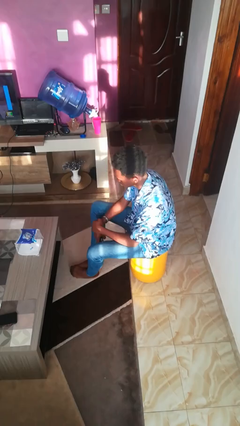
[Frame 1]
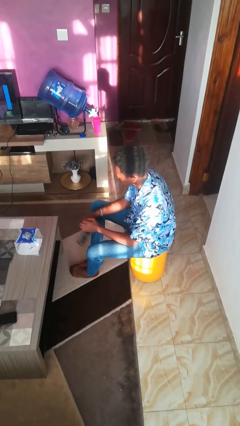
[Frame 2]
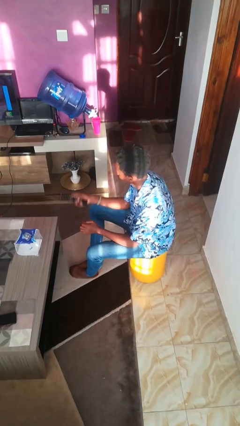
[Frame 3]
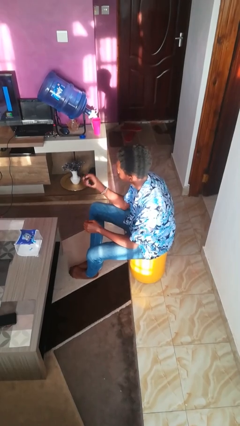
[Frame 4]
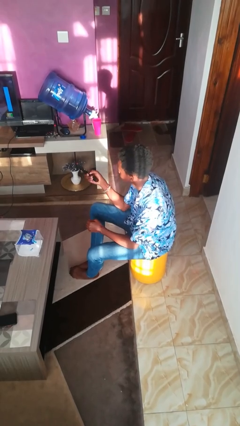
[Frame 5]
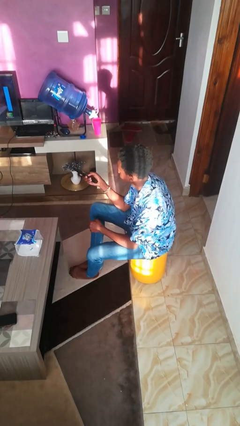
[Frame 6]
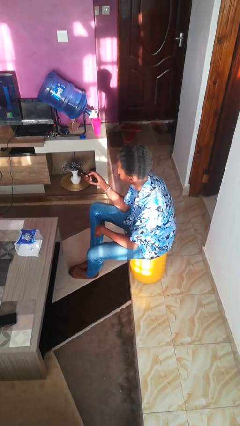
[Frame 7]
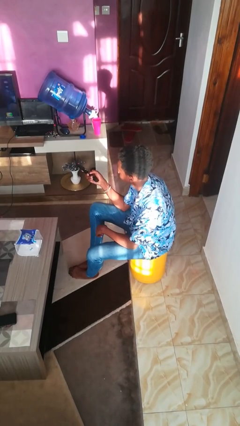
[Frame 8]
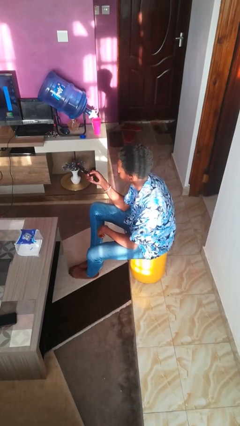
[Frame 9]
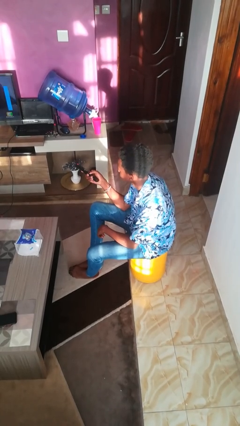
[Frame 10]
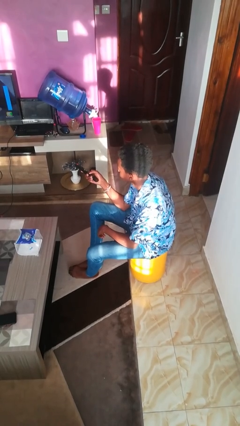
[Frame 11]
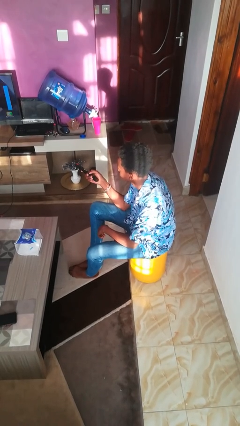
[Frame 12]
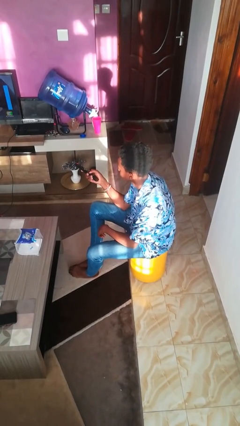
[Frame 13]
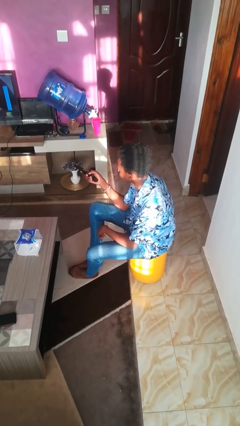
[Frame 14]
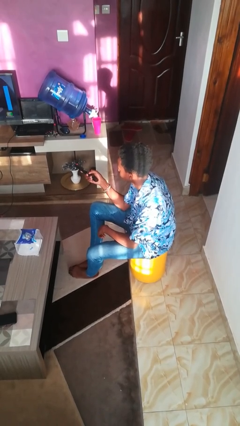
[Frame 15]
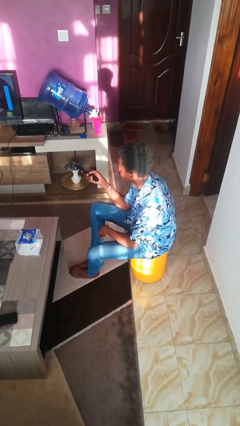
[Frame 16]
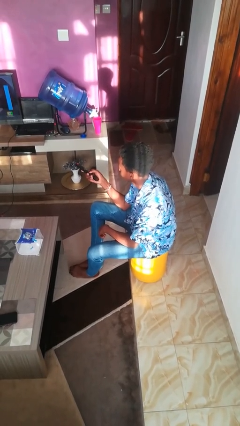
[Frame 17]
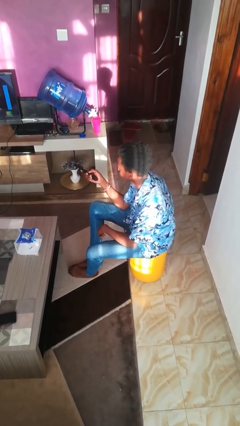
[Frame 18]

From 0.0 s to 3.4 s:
person uses television remote

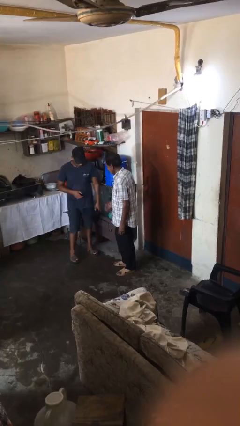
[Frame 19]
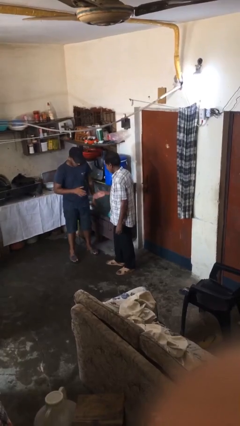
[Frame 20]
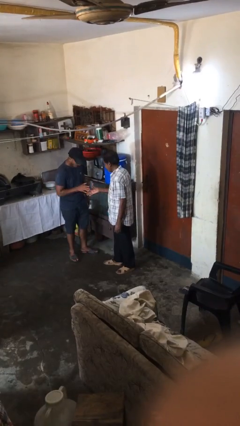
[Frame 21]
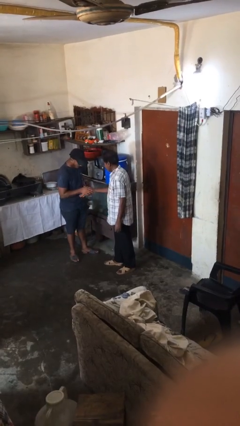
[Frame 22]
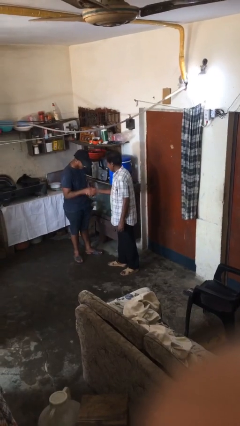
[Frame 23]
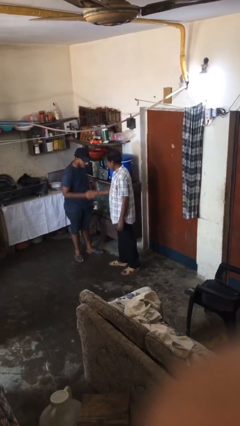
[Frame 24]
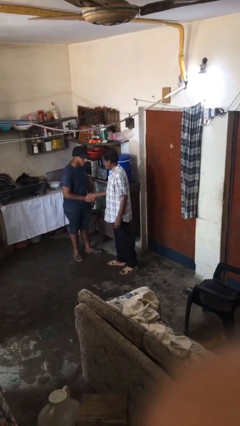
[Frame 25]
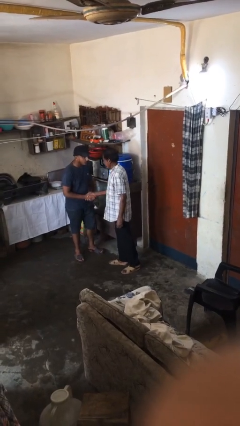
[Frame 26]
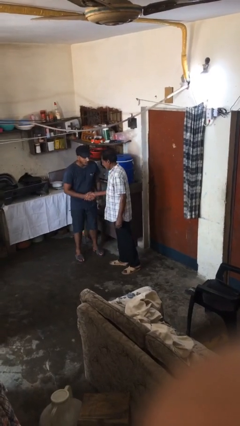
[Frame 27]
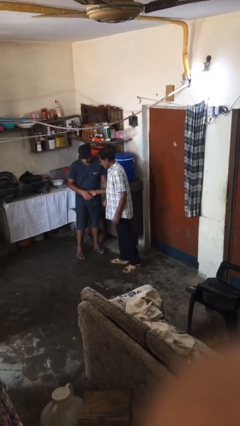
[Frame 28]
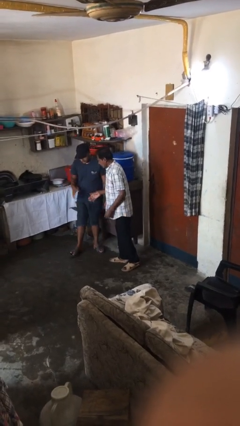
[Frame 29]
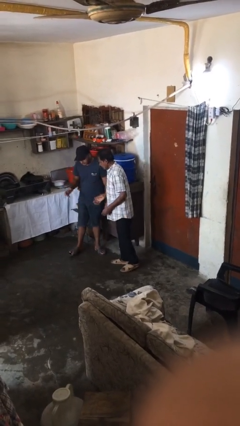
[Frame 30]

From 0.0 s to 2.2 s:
person shakes hand

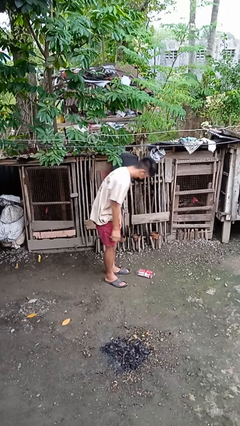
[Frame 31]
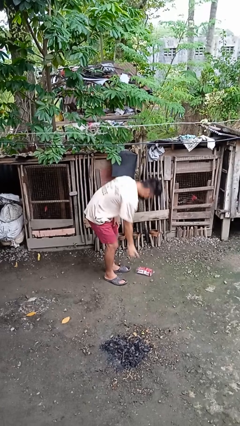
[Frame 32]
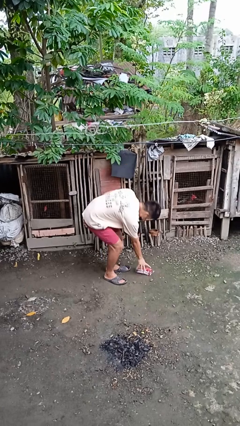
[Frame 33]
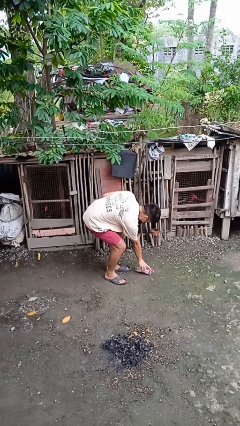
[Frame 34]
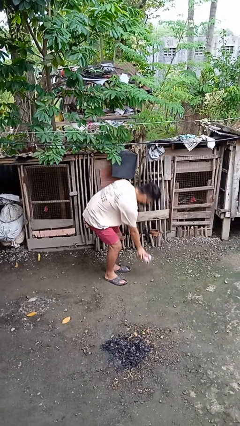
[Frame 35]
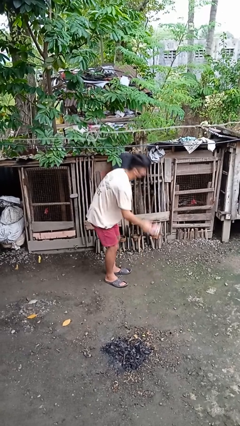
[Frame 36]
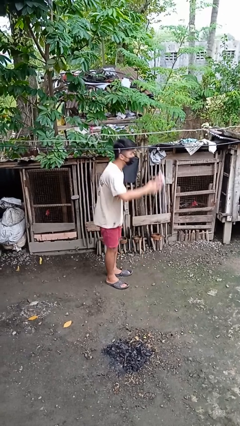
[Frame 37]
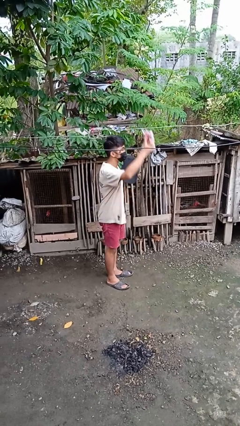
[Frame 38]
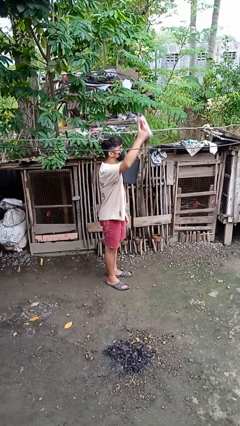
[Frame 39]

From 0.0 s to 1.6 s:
person picks up object from floor

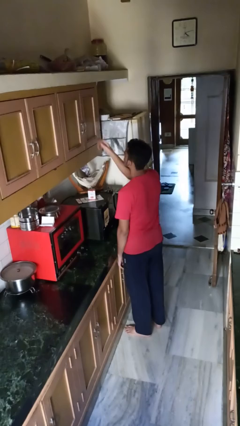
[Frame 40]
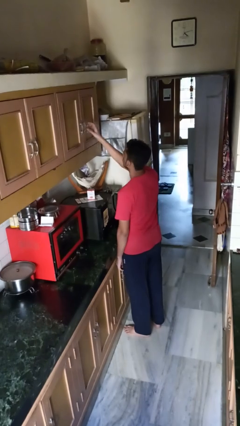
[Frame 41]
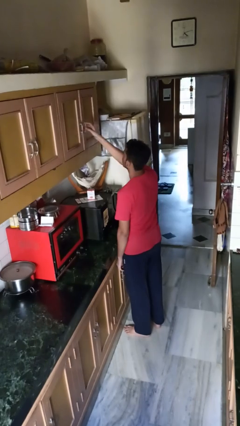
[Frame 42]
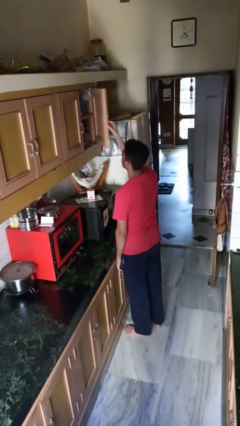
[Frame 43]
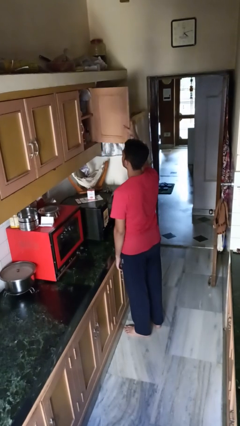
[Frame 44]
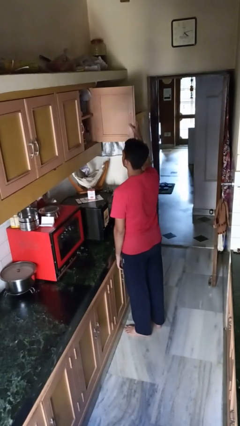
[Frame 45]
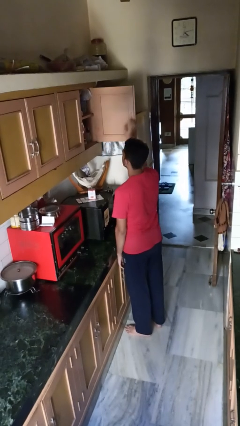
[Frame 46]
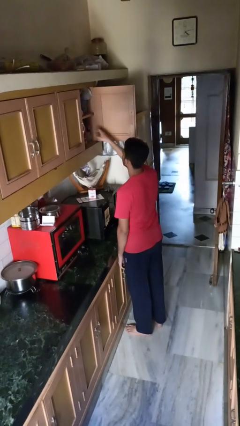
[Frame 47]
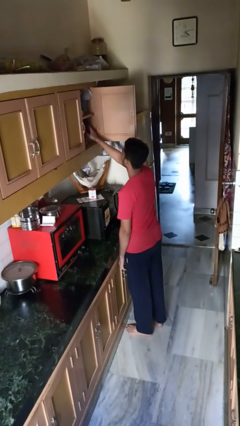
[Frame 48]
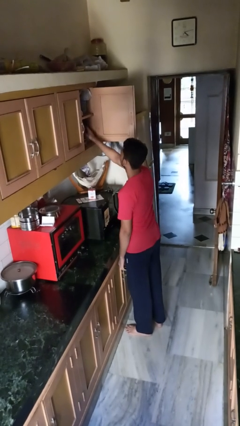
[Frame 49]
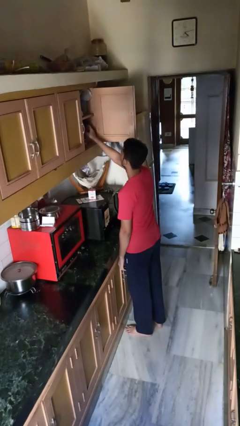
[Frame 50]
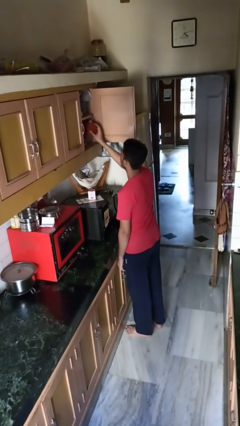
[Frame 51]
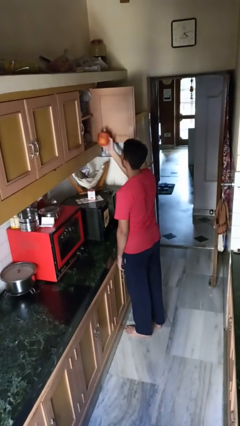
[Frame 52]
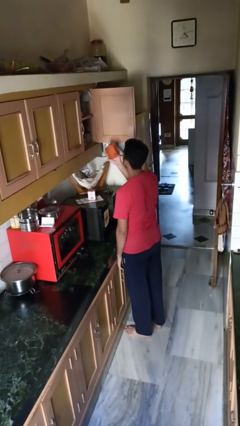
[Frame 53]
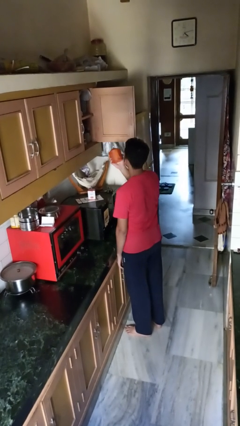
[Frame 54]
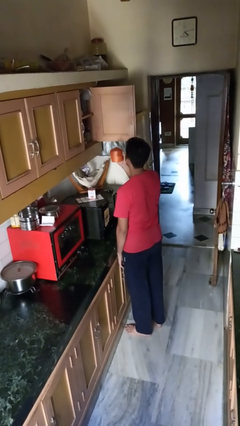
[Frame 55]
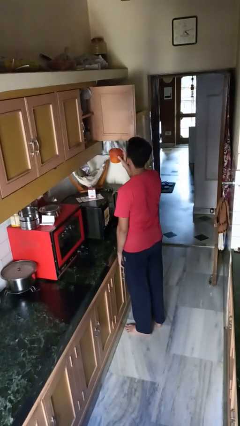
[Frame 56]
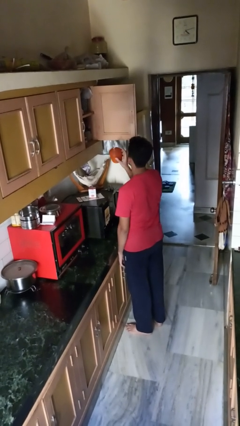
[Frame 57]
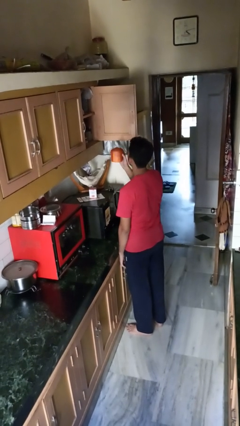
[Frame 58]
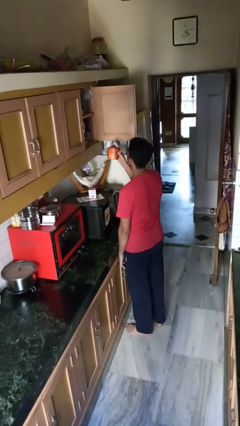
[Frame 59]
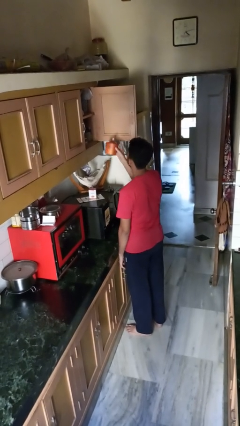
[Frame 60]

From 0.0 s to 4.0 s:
person takes object from cabinet

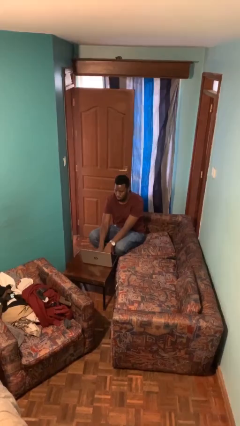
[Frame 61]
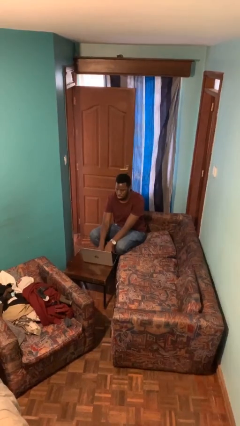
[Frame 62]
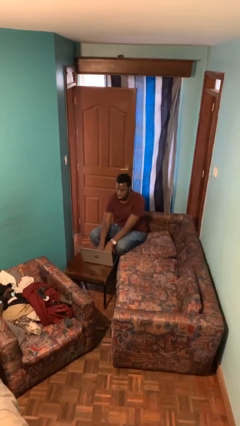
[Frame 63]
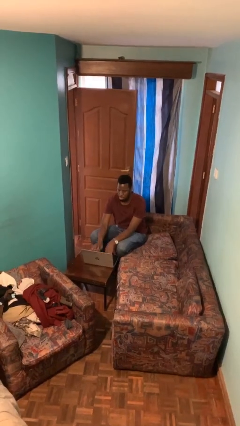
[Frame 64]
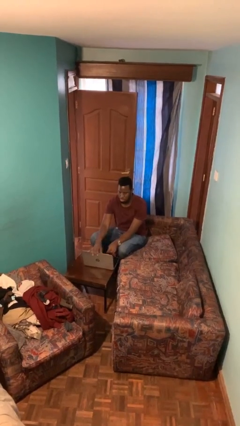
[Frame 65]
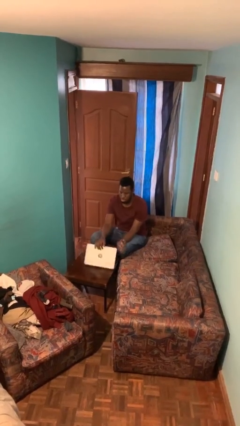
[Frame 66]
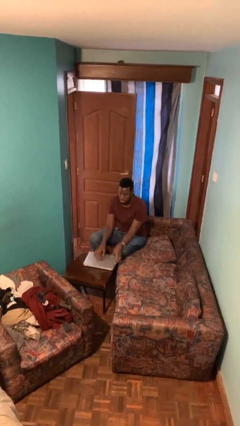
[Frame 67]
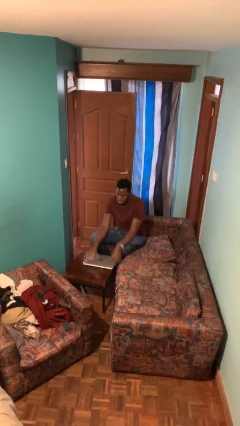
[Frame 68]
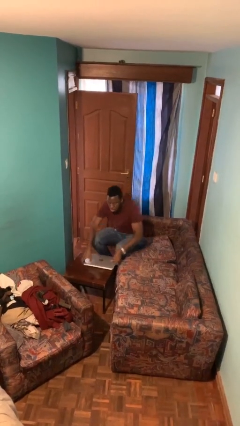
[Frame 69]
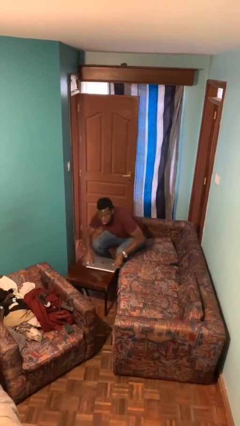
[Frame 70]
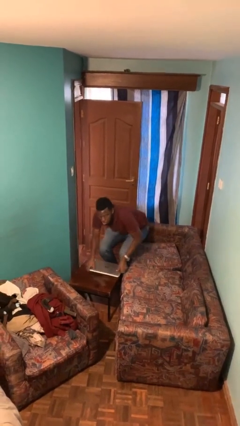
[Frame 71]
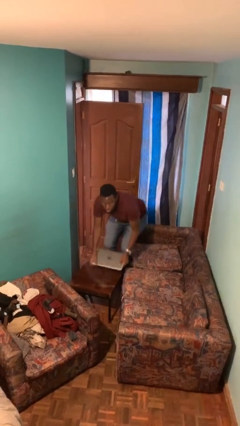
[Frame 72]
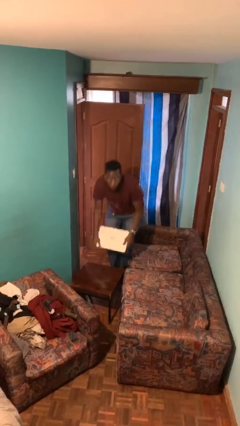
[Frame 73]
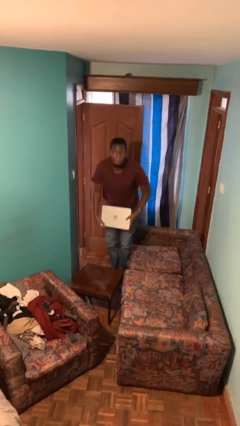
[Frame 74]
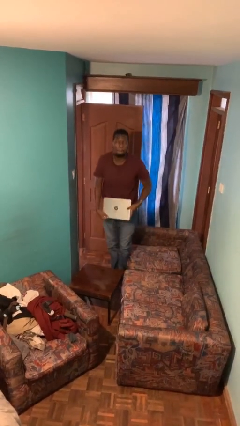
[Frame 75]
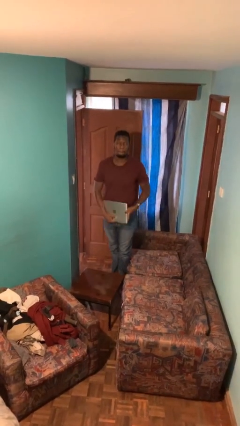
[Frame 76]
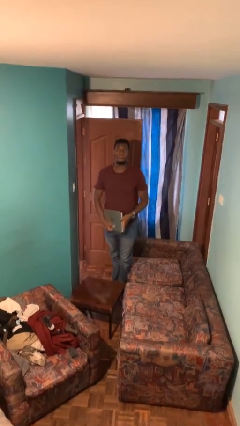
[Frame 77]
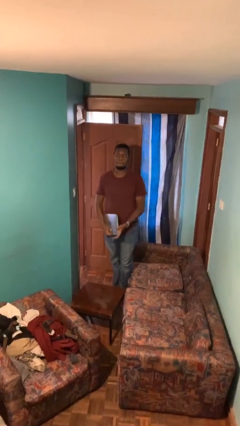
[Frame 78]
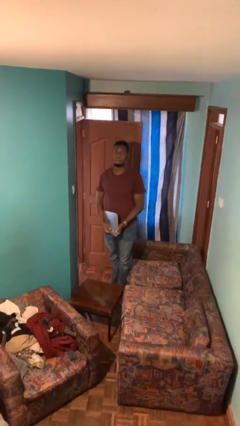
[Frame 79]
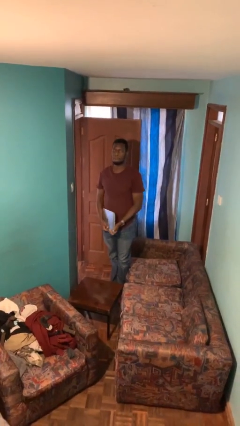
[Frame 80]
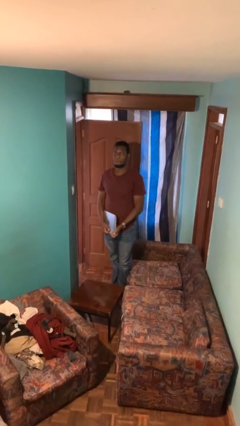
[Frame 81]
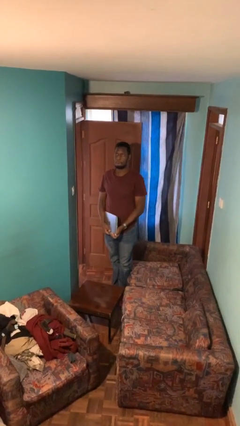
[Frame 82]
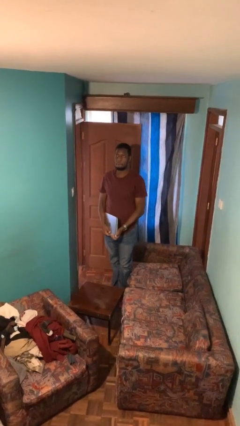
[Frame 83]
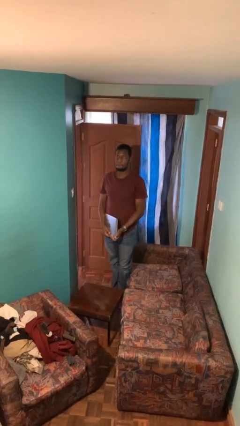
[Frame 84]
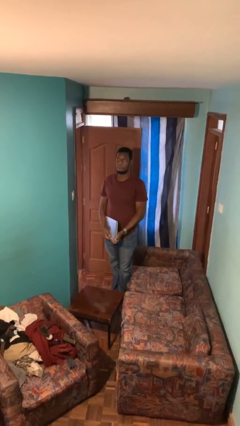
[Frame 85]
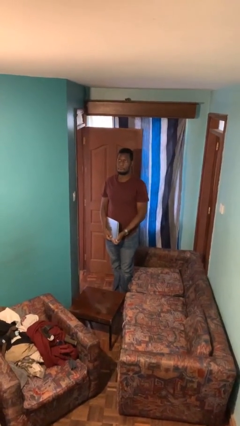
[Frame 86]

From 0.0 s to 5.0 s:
person stands up

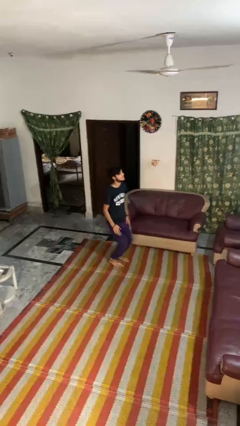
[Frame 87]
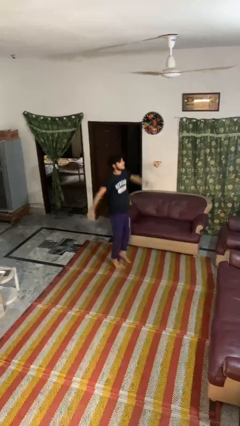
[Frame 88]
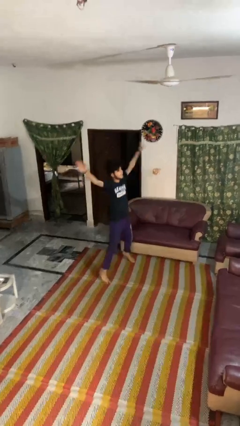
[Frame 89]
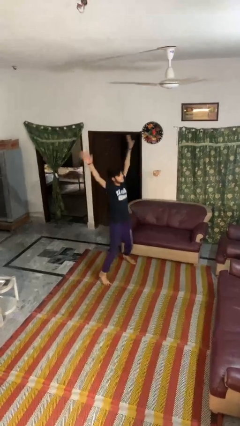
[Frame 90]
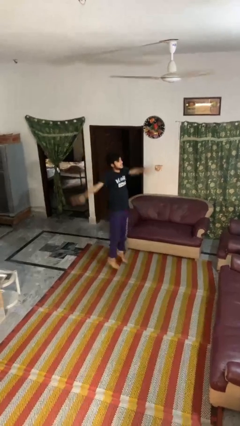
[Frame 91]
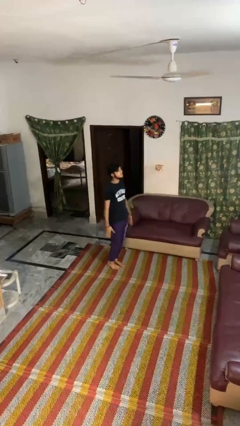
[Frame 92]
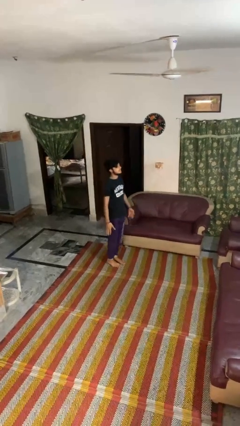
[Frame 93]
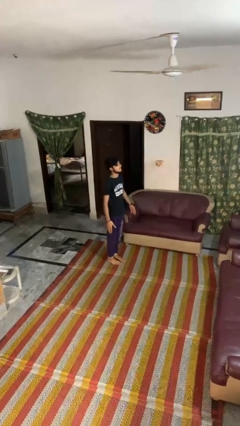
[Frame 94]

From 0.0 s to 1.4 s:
person exercises with jumping jacks
